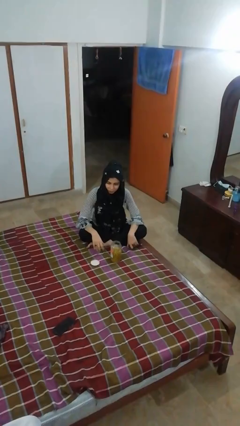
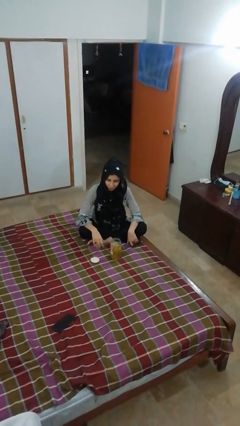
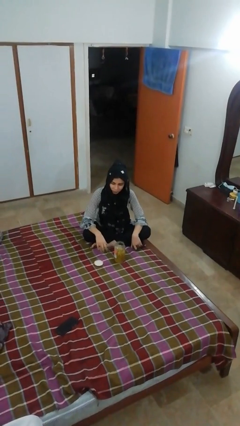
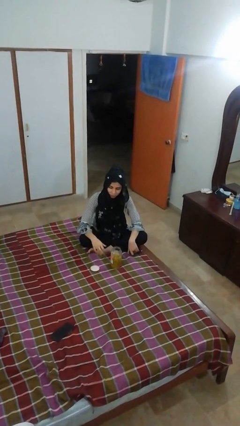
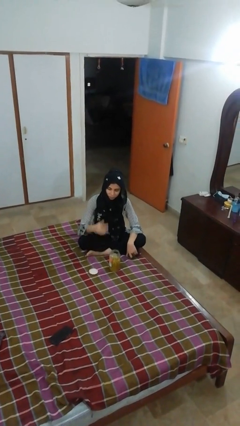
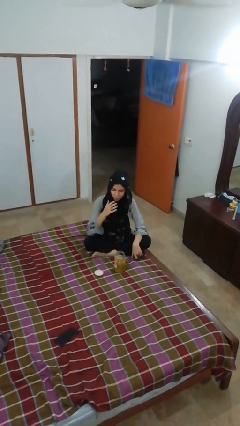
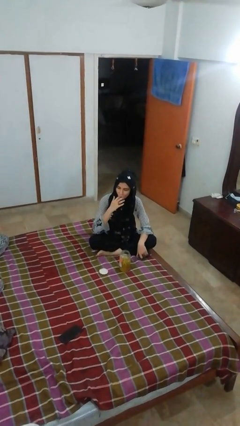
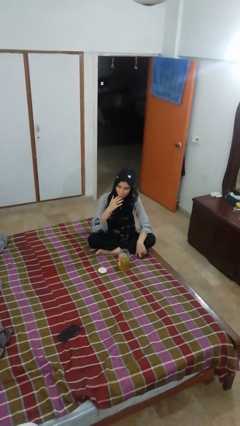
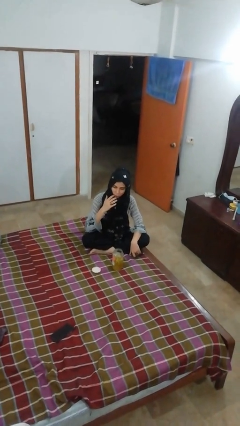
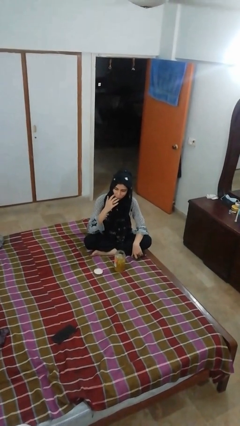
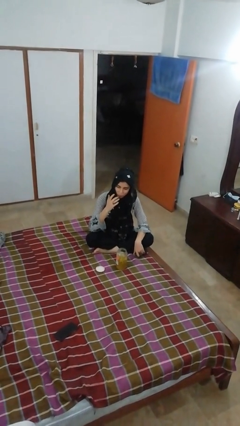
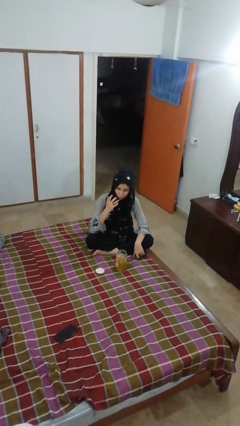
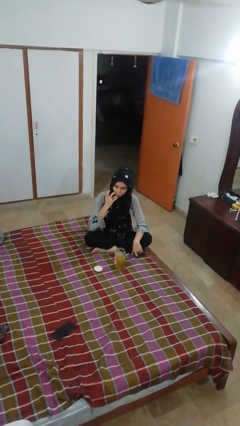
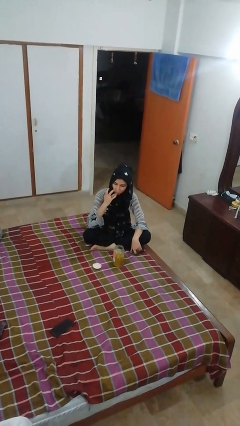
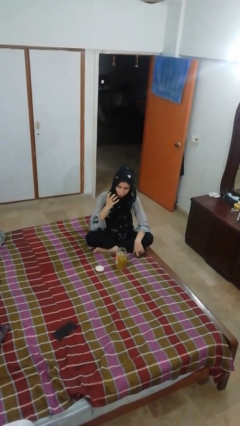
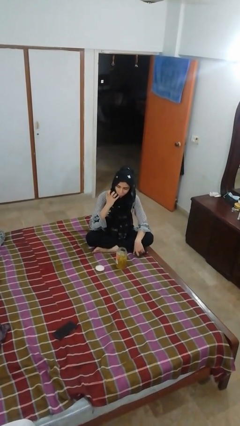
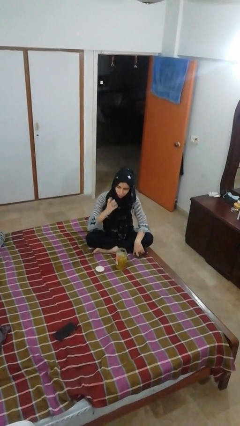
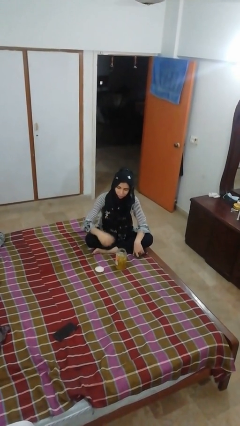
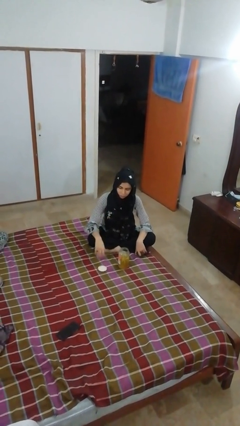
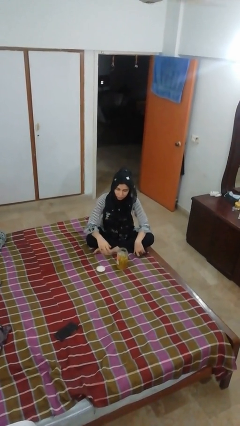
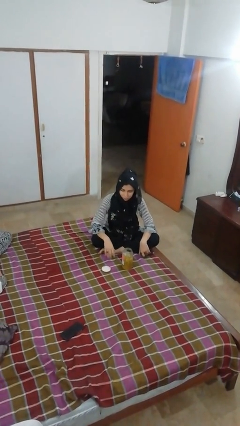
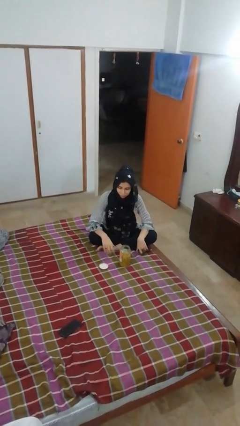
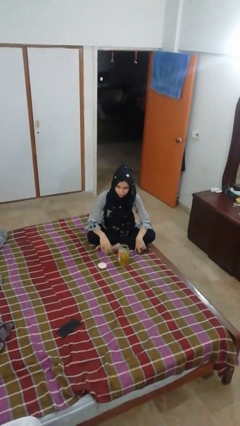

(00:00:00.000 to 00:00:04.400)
person licks fingers

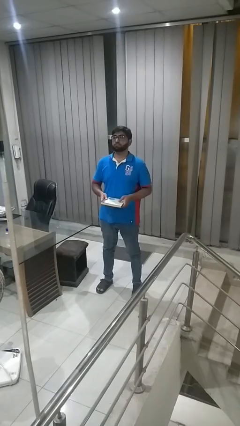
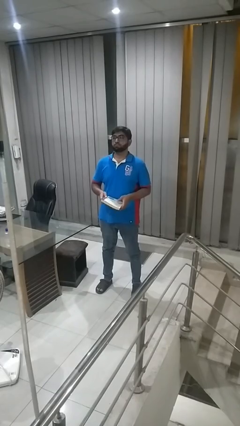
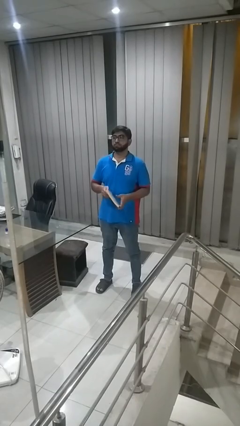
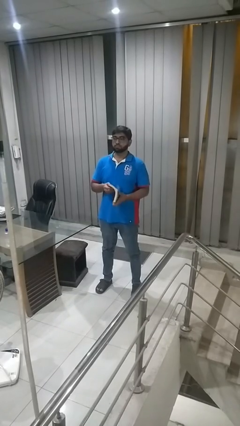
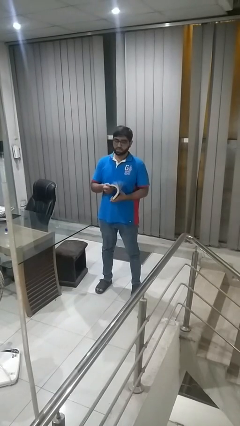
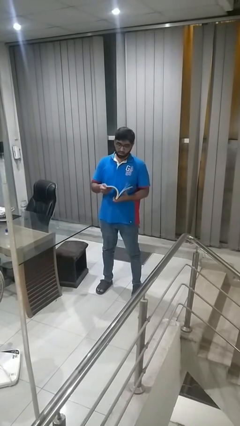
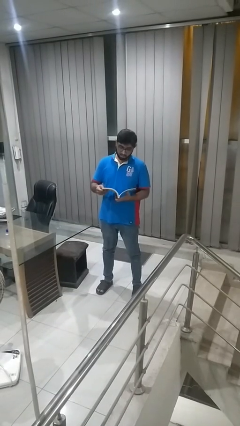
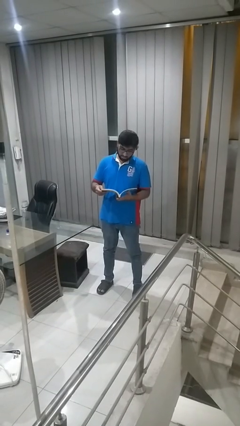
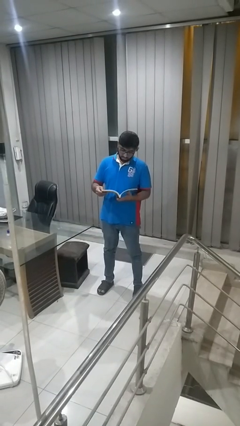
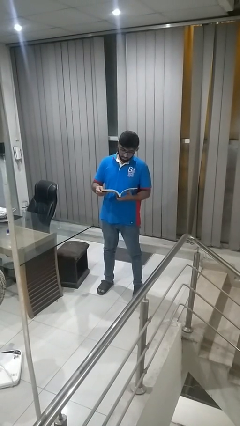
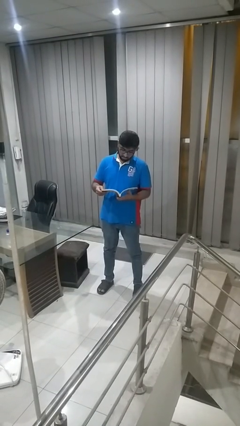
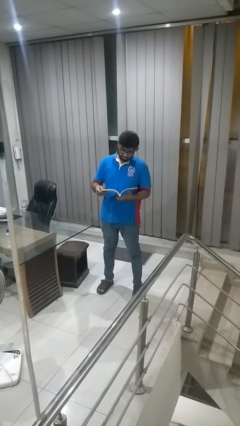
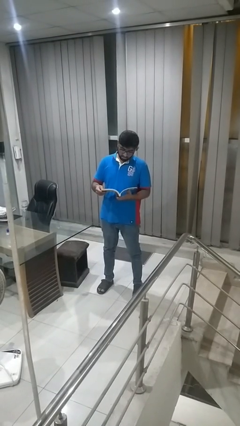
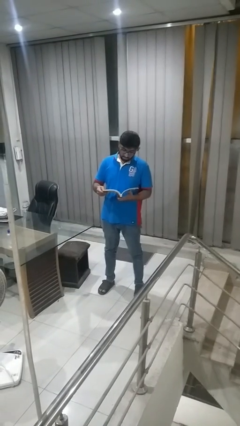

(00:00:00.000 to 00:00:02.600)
person reads book

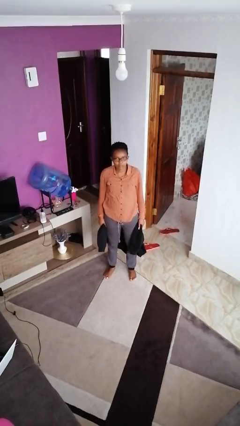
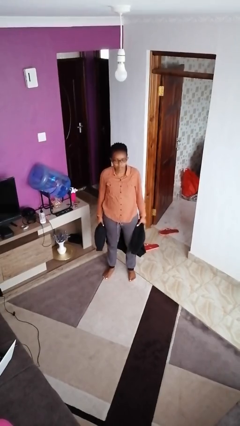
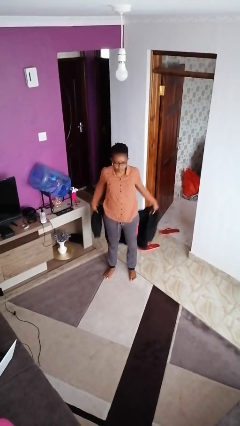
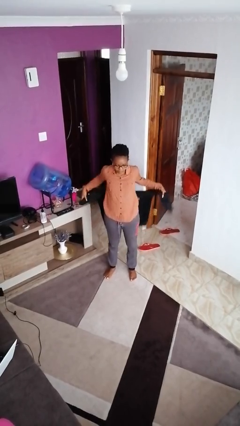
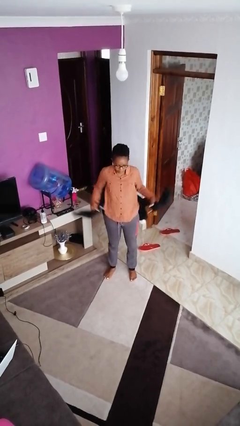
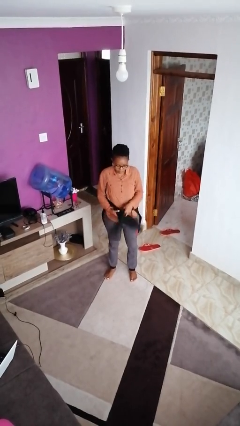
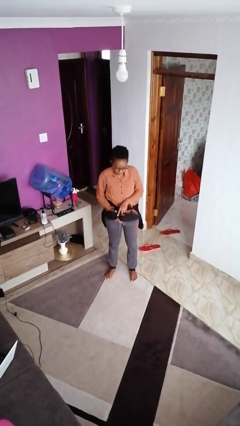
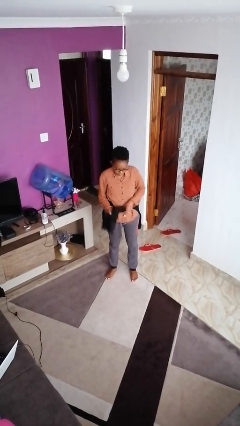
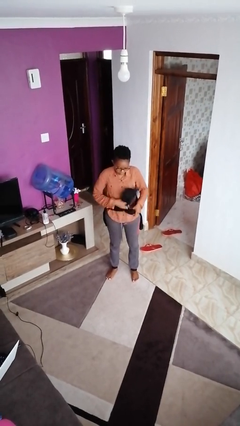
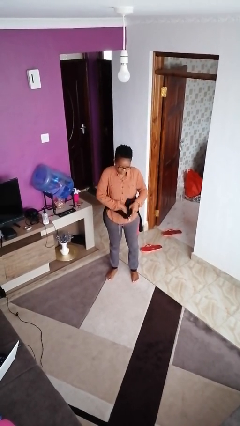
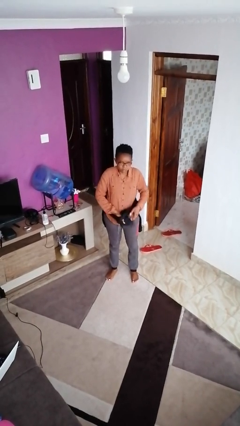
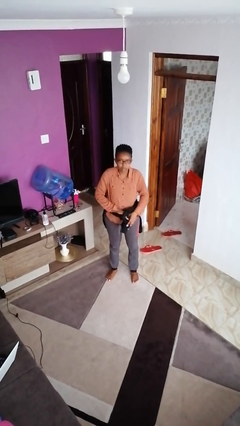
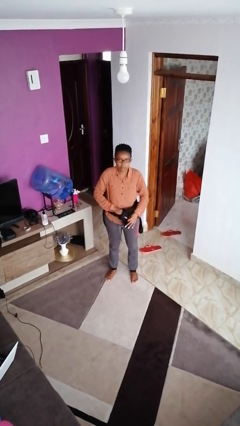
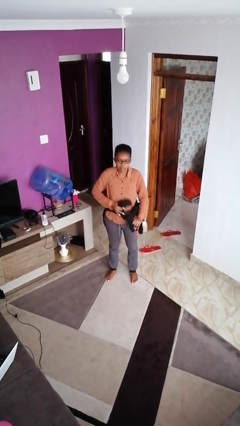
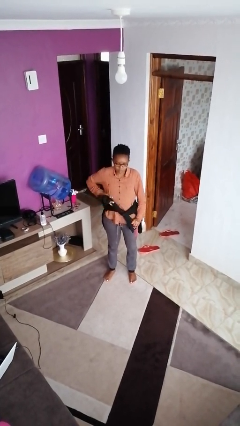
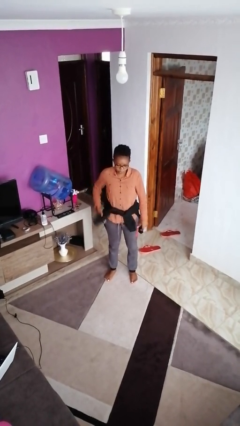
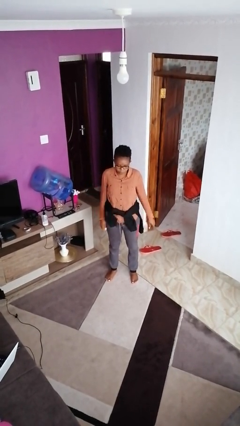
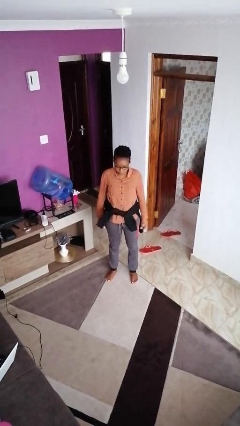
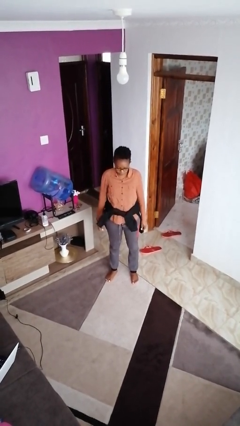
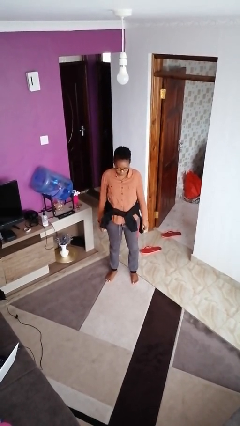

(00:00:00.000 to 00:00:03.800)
person ties jacket around waist

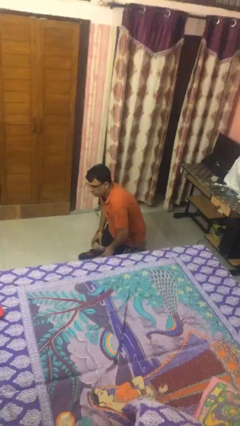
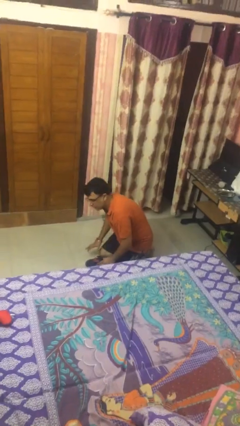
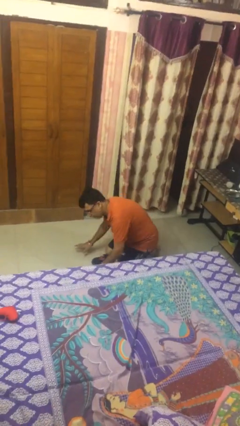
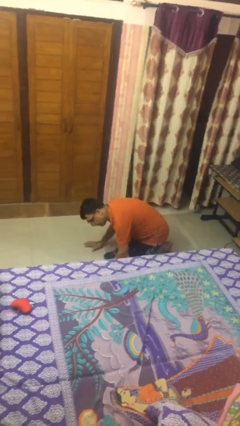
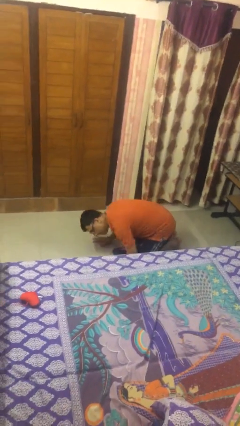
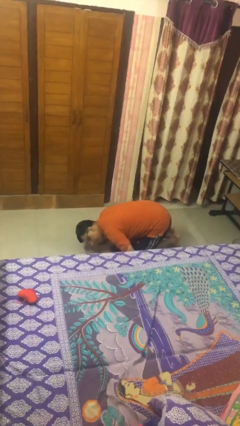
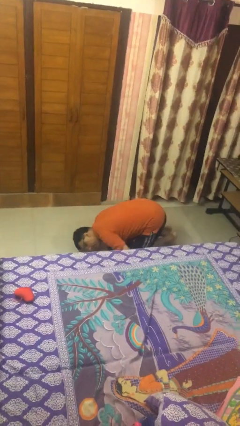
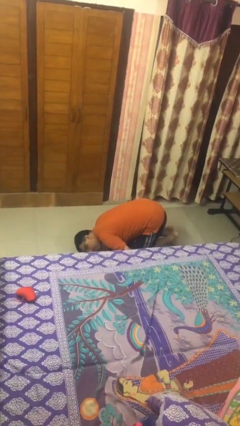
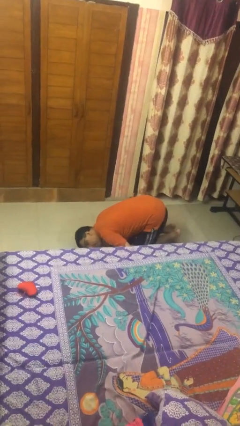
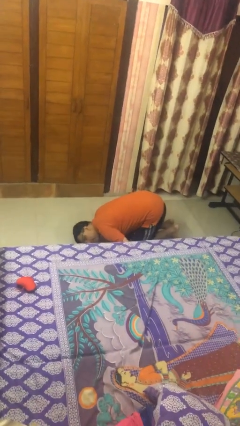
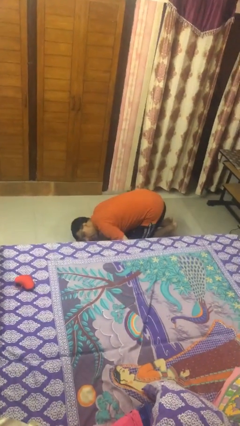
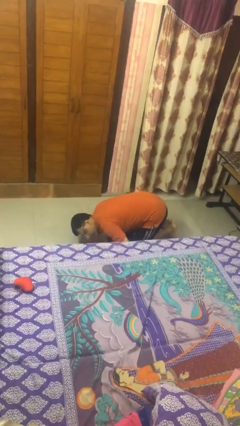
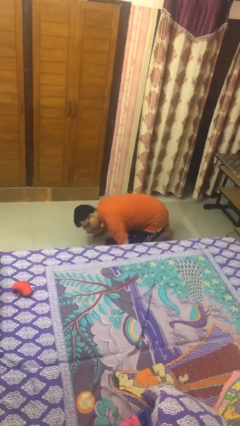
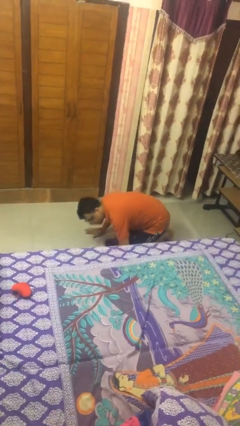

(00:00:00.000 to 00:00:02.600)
person searches under bed

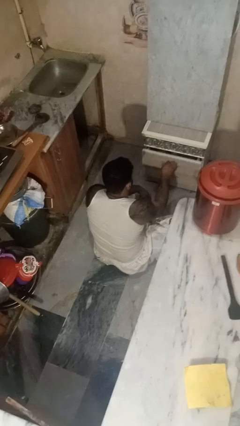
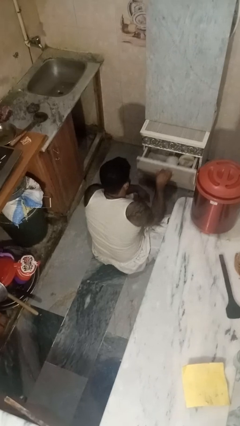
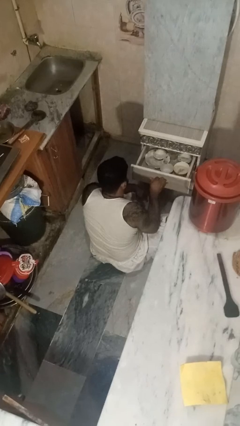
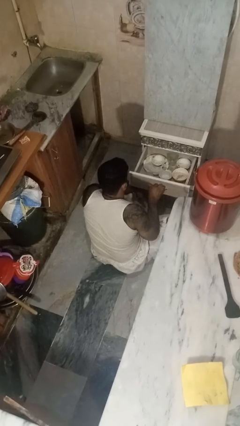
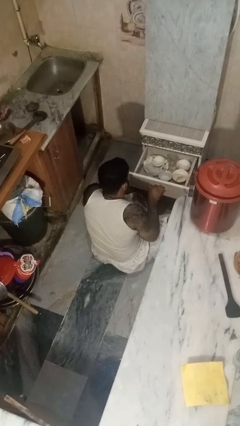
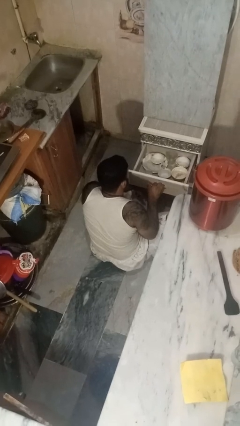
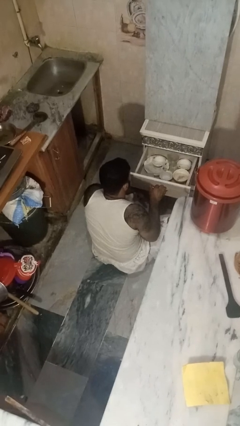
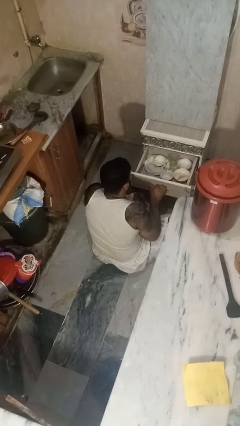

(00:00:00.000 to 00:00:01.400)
person opens kitchen drawer

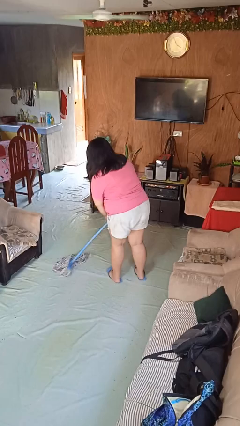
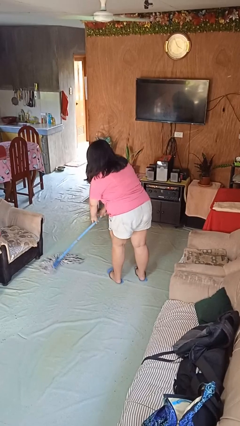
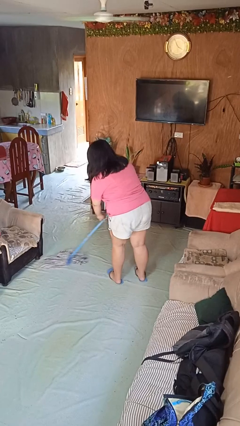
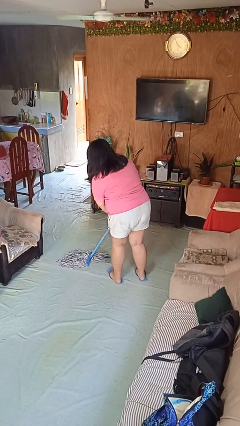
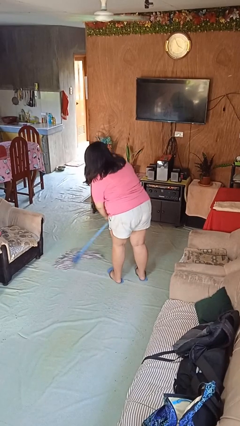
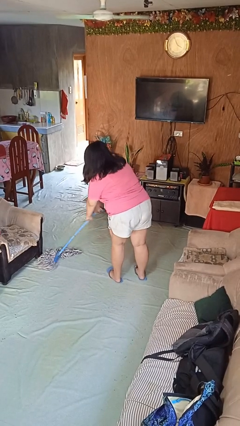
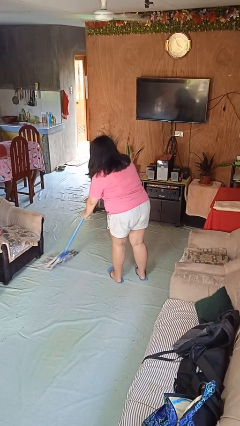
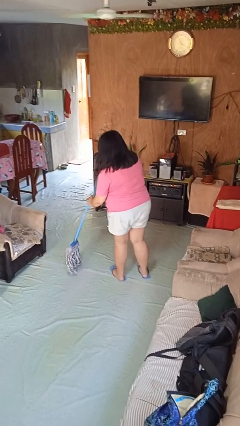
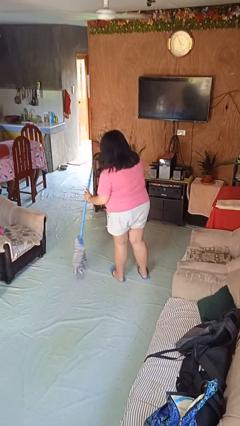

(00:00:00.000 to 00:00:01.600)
person mops

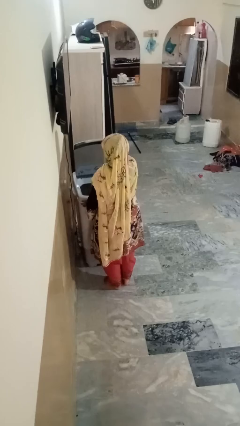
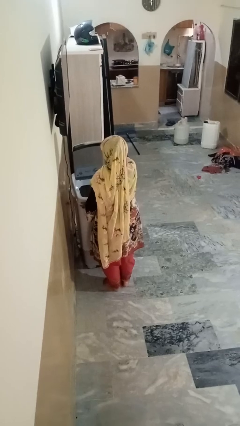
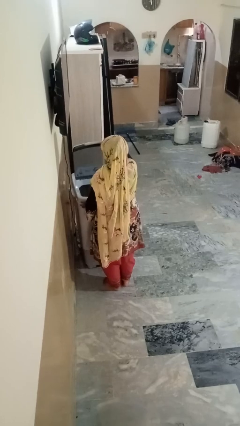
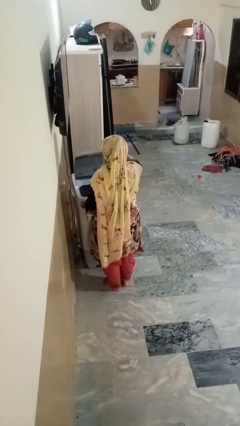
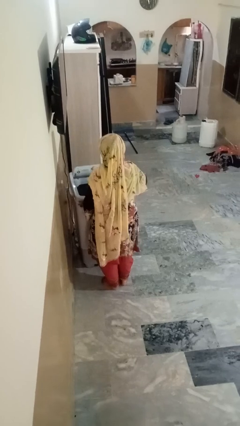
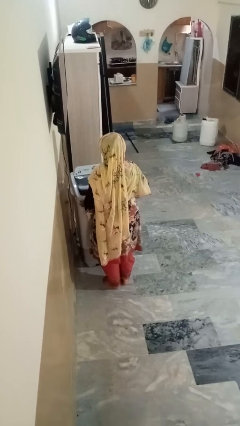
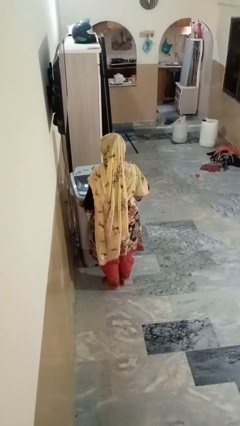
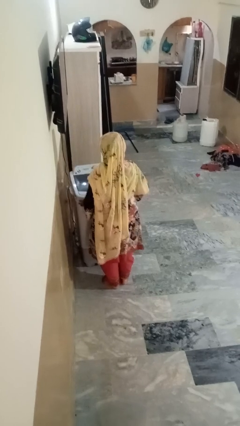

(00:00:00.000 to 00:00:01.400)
person closes clothes washer
